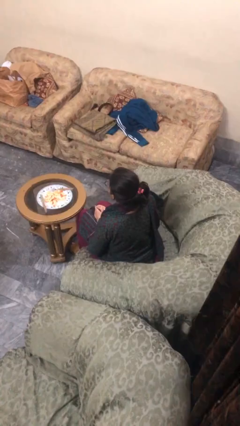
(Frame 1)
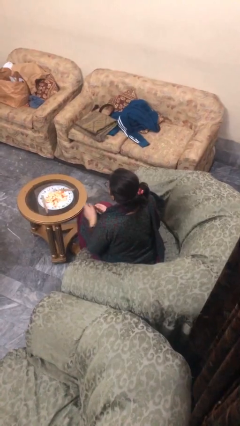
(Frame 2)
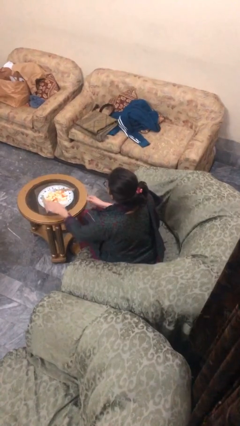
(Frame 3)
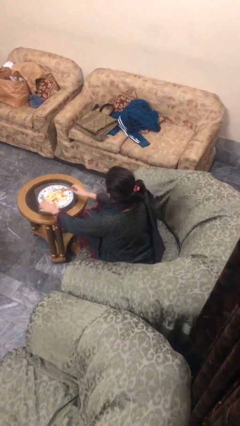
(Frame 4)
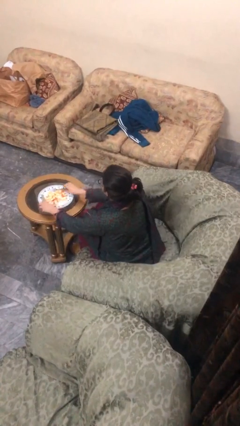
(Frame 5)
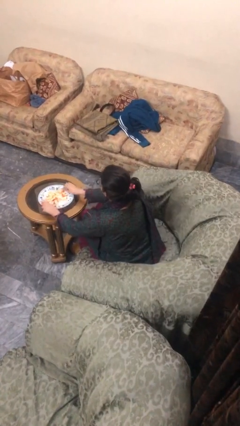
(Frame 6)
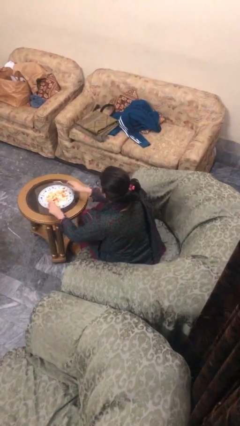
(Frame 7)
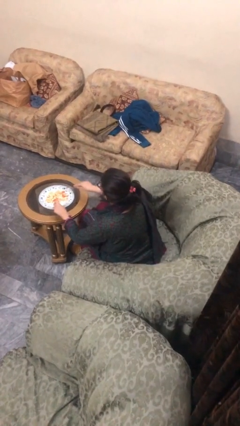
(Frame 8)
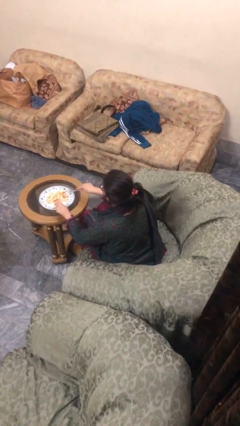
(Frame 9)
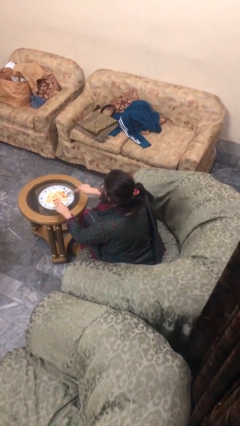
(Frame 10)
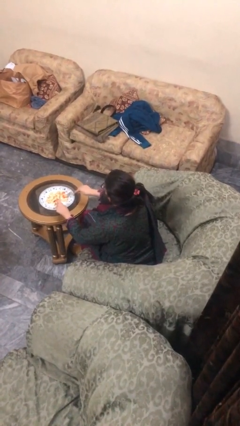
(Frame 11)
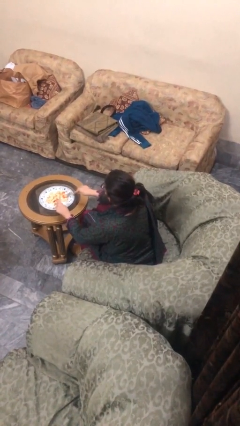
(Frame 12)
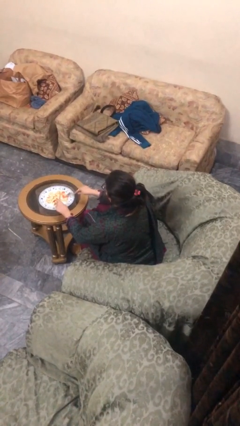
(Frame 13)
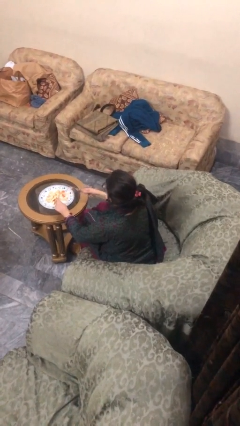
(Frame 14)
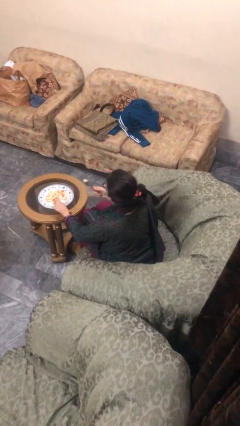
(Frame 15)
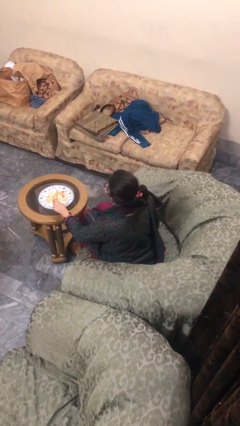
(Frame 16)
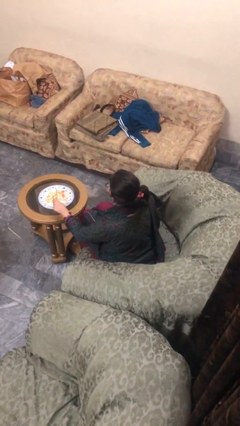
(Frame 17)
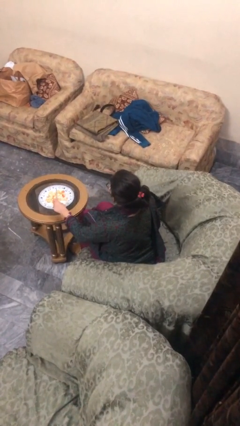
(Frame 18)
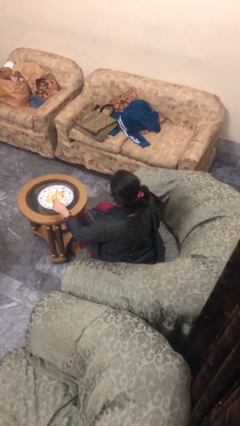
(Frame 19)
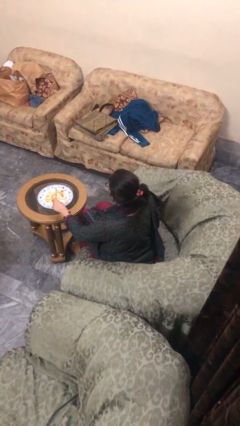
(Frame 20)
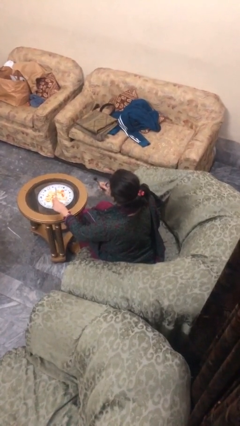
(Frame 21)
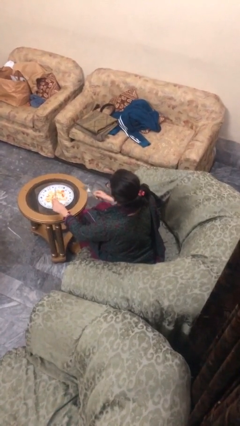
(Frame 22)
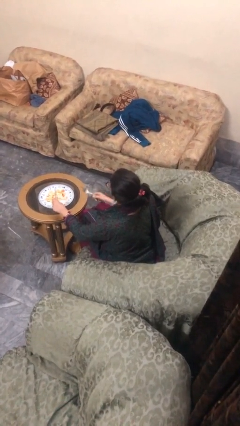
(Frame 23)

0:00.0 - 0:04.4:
person eats with utensil

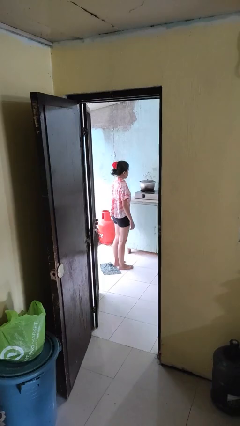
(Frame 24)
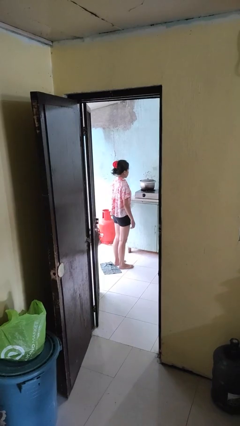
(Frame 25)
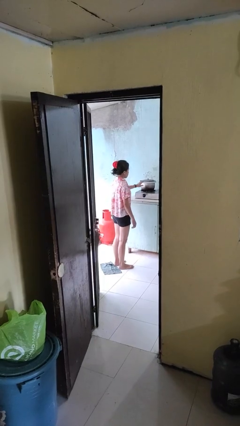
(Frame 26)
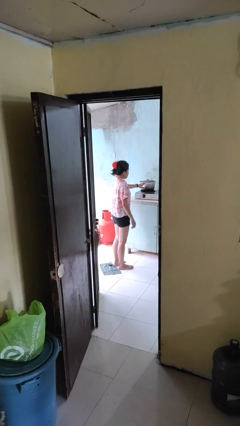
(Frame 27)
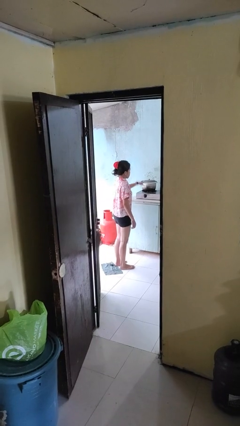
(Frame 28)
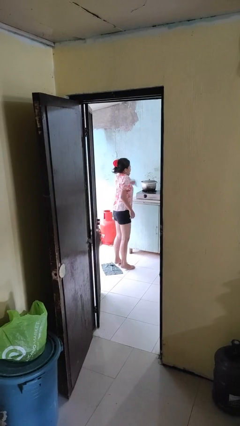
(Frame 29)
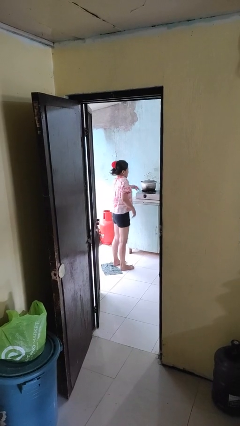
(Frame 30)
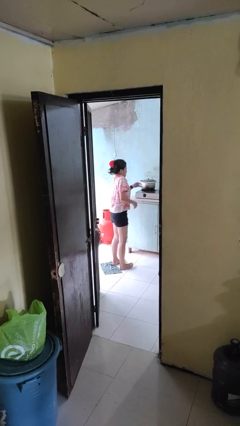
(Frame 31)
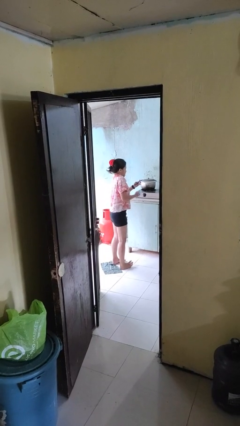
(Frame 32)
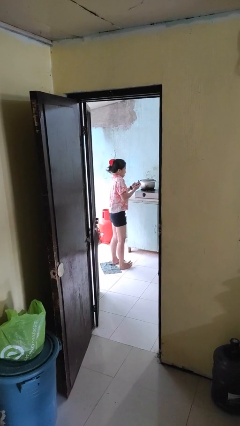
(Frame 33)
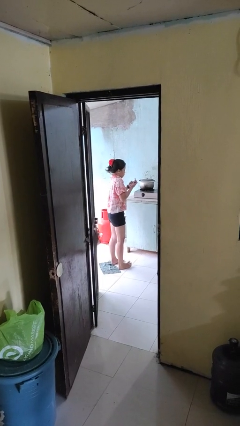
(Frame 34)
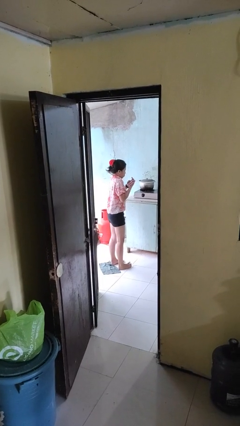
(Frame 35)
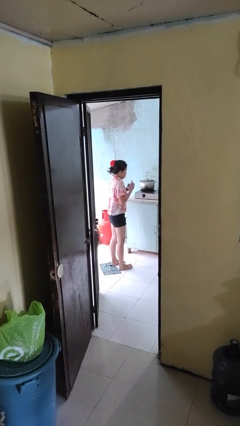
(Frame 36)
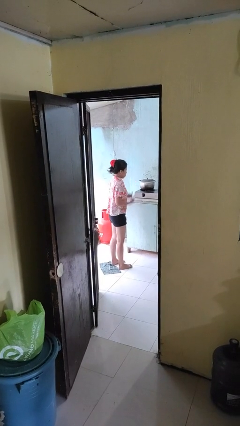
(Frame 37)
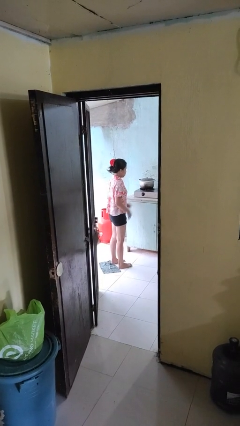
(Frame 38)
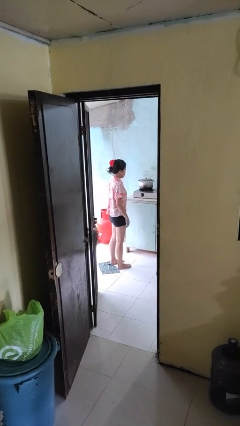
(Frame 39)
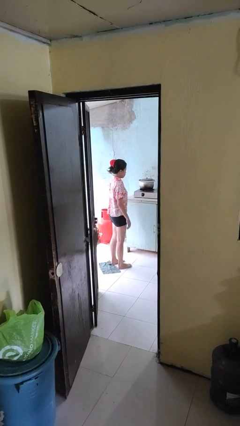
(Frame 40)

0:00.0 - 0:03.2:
person burns hand

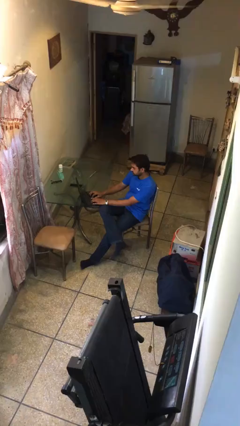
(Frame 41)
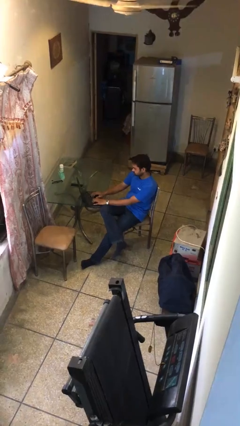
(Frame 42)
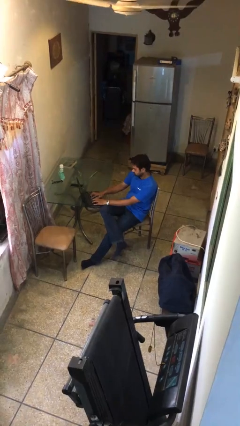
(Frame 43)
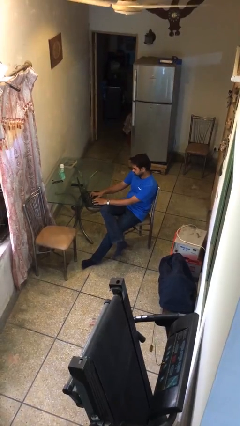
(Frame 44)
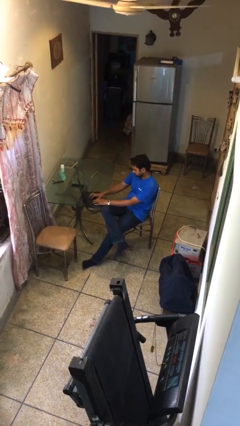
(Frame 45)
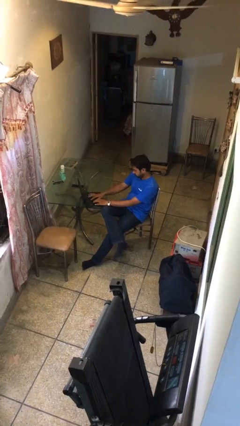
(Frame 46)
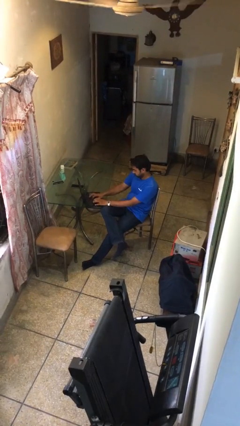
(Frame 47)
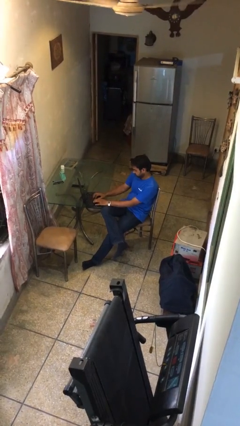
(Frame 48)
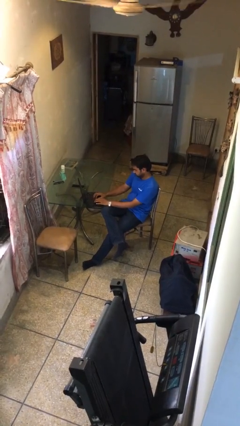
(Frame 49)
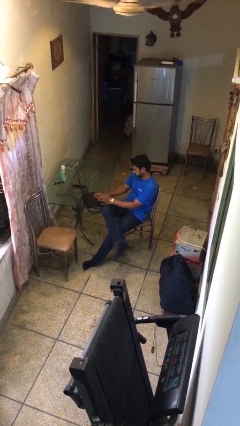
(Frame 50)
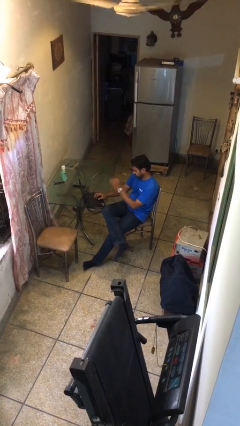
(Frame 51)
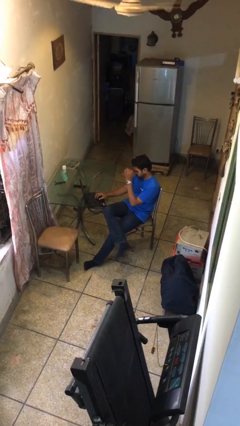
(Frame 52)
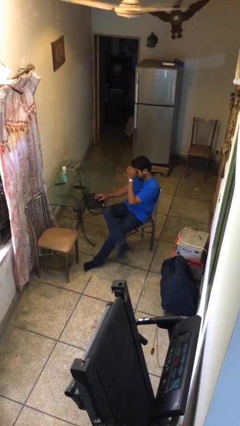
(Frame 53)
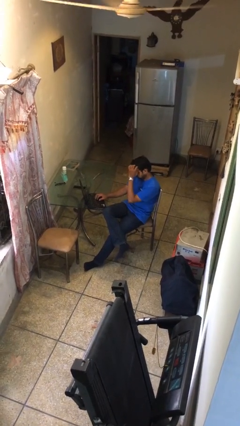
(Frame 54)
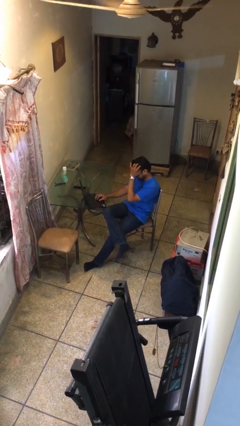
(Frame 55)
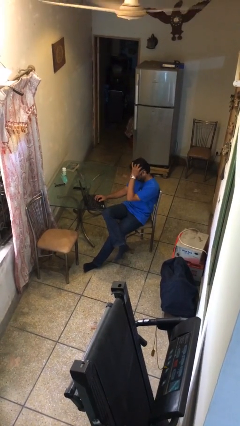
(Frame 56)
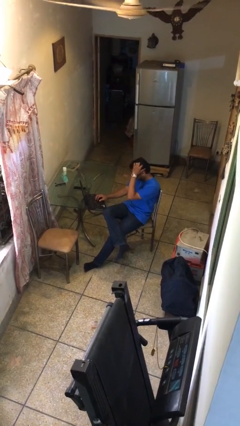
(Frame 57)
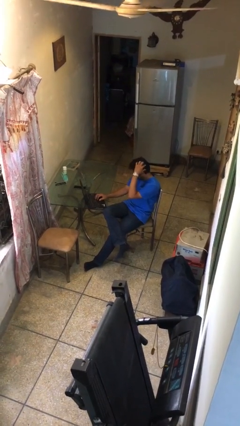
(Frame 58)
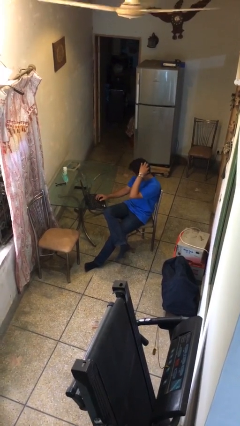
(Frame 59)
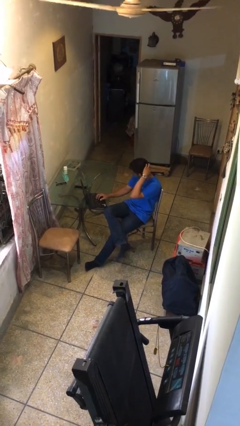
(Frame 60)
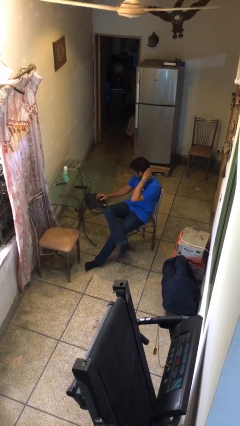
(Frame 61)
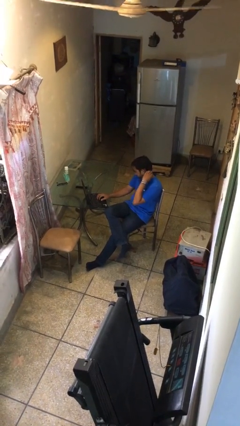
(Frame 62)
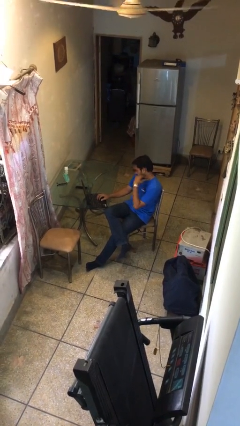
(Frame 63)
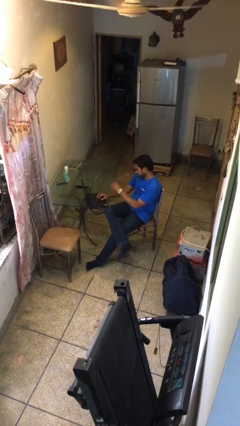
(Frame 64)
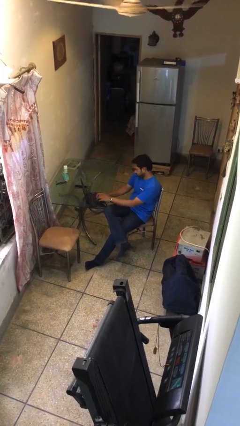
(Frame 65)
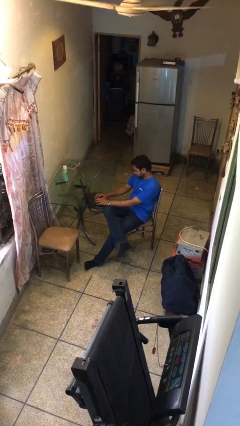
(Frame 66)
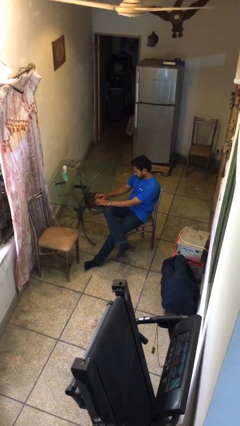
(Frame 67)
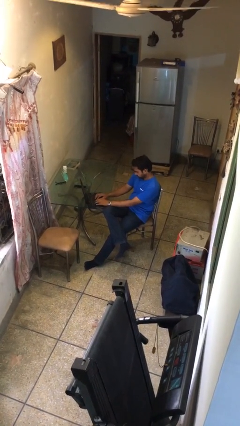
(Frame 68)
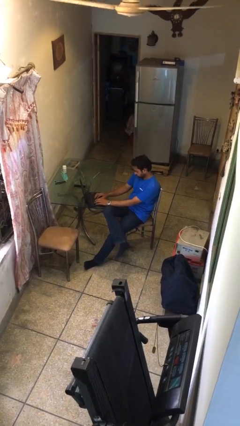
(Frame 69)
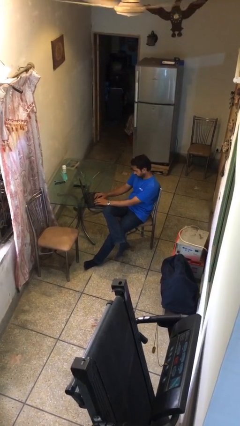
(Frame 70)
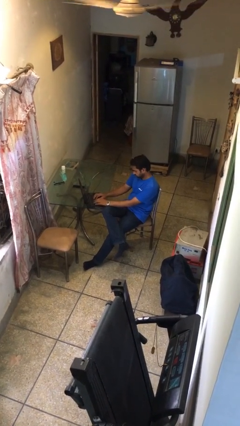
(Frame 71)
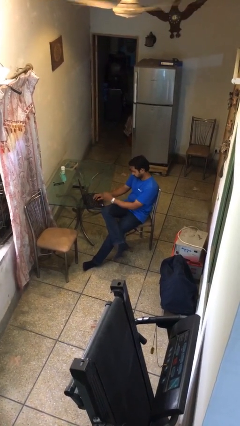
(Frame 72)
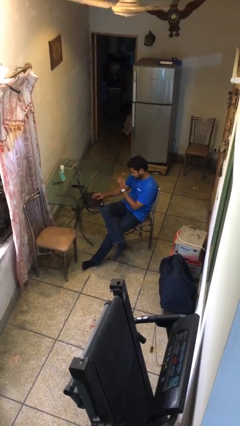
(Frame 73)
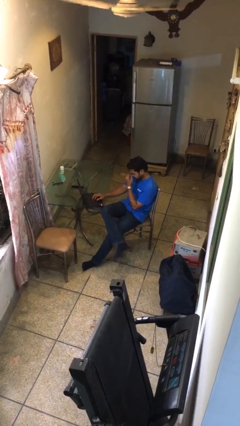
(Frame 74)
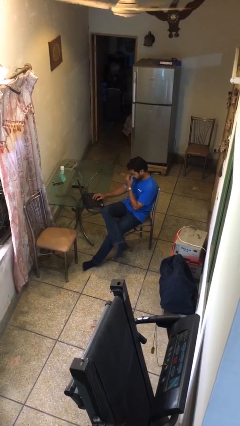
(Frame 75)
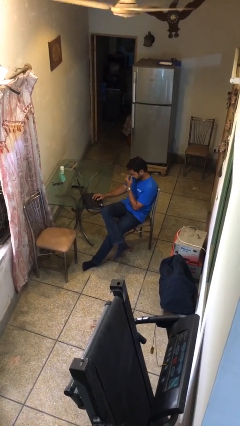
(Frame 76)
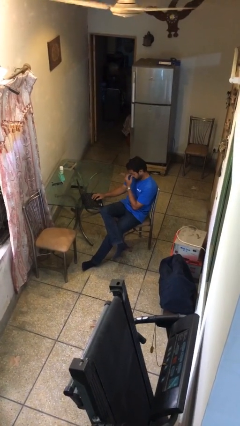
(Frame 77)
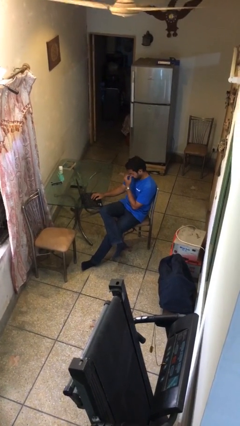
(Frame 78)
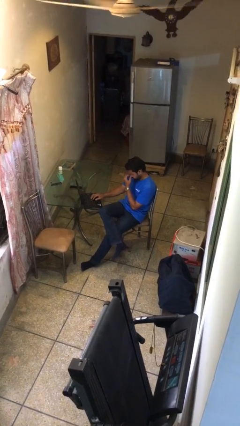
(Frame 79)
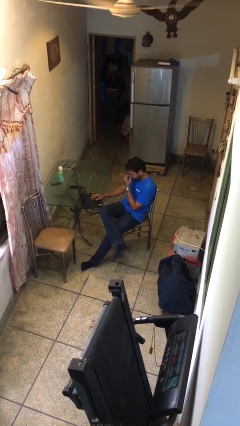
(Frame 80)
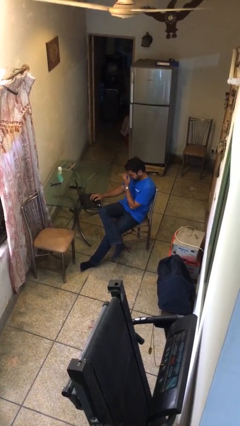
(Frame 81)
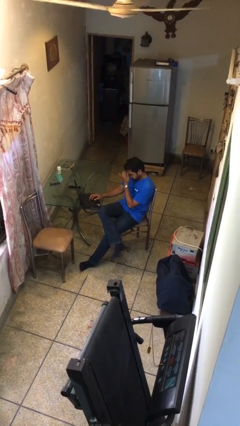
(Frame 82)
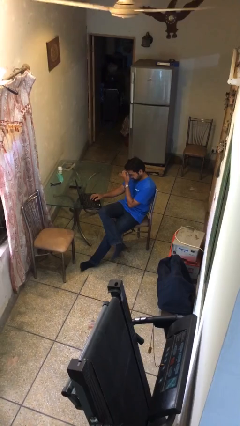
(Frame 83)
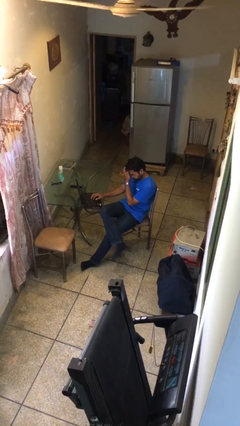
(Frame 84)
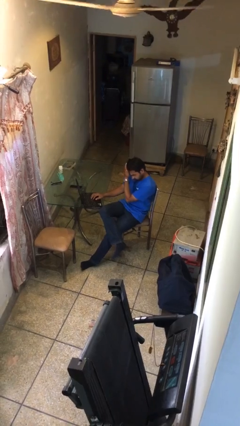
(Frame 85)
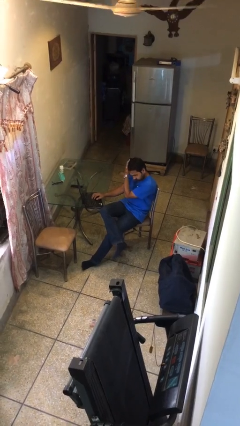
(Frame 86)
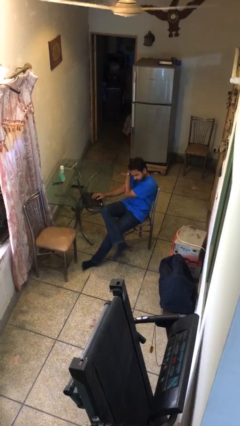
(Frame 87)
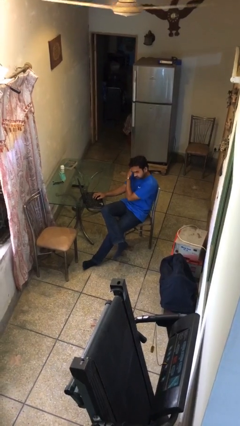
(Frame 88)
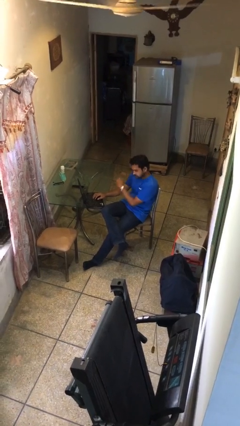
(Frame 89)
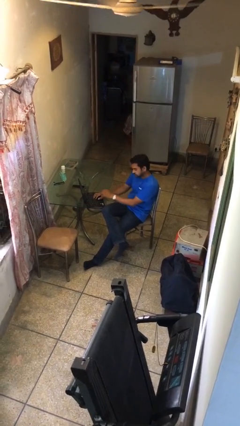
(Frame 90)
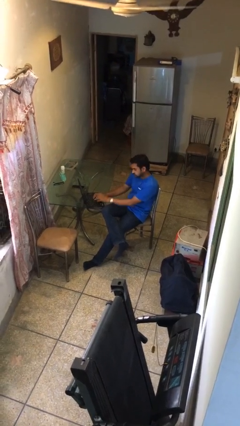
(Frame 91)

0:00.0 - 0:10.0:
person interacts with laptop

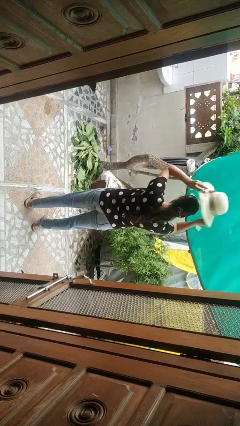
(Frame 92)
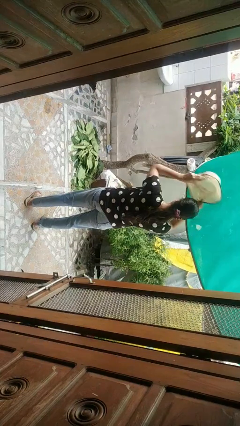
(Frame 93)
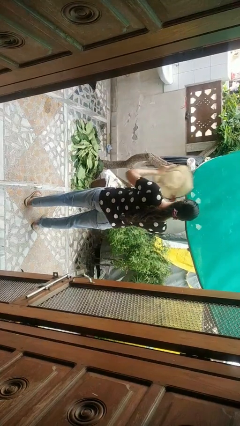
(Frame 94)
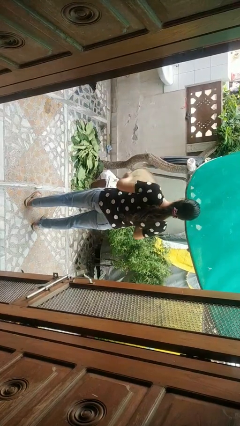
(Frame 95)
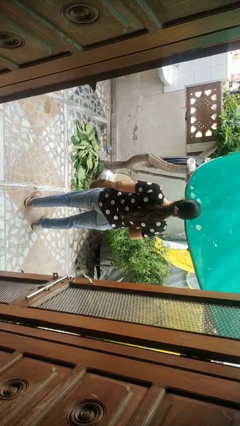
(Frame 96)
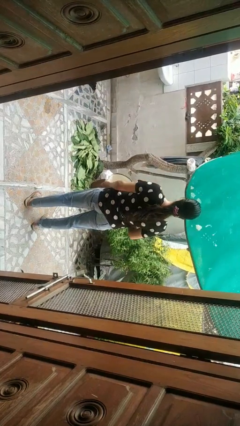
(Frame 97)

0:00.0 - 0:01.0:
person takes off hat
